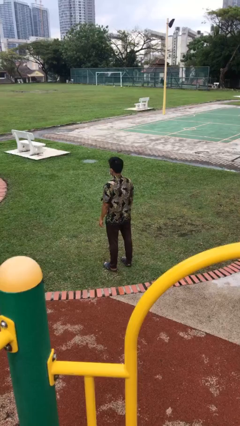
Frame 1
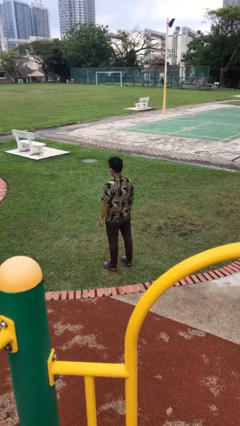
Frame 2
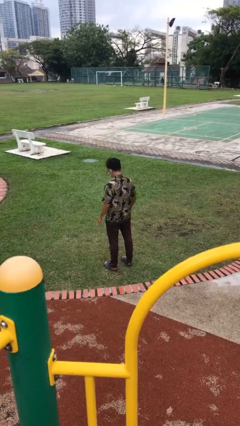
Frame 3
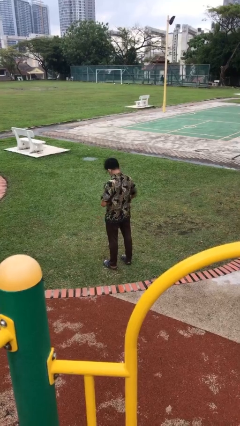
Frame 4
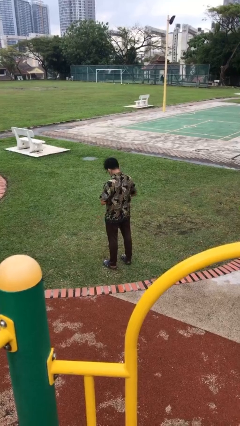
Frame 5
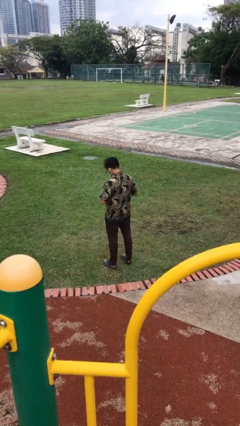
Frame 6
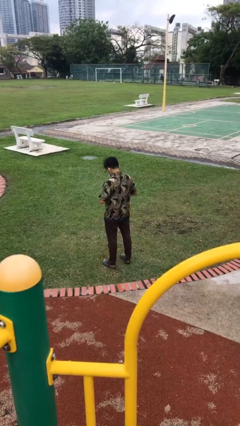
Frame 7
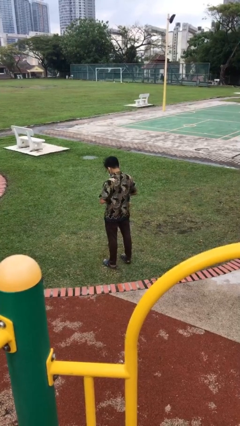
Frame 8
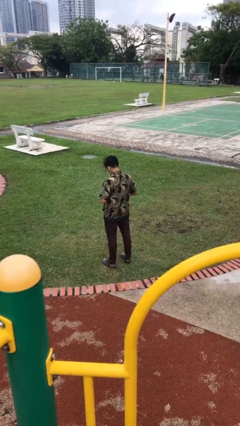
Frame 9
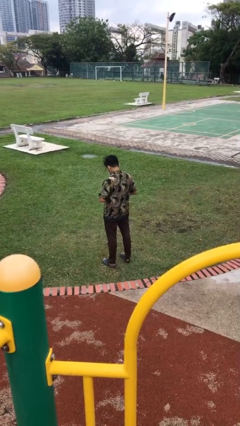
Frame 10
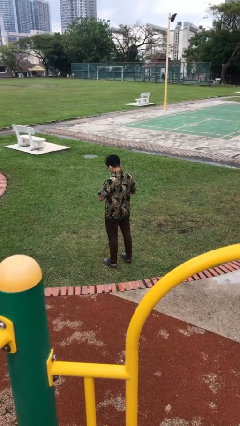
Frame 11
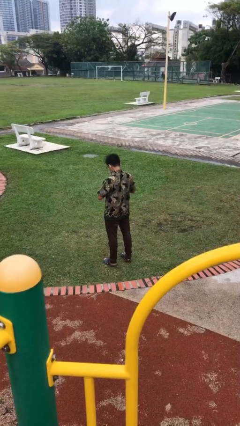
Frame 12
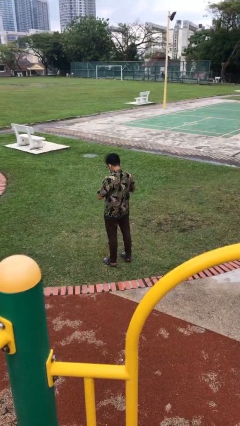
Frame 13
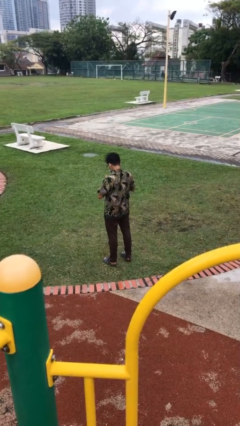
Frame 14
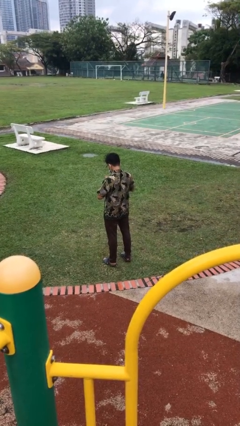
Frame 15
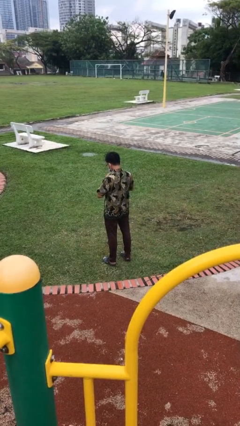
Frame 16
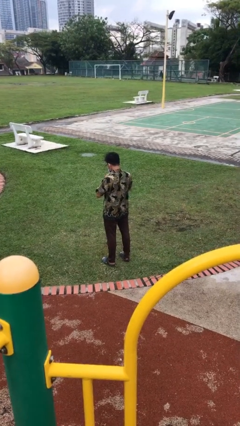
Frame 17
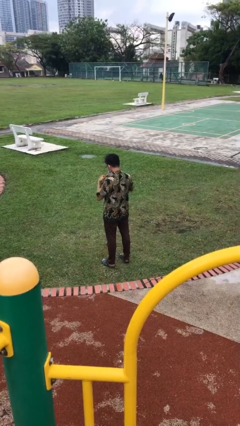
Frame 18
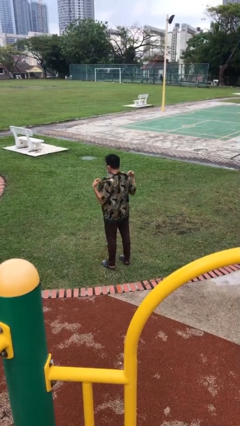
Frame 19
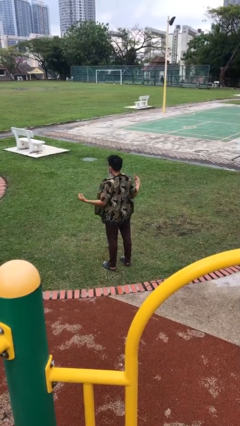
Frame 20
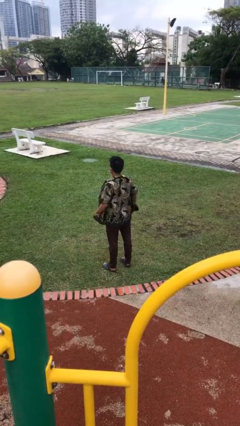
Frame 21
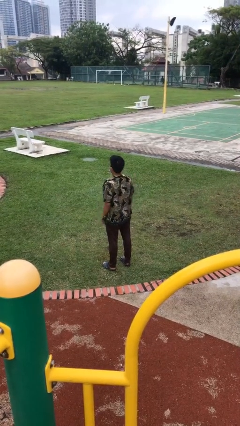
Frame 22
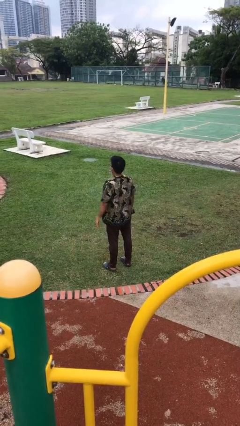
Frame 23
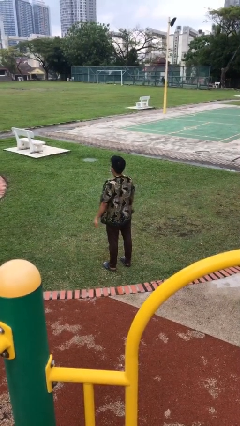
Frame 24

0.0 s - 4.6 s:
person unbuttons shirt

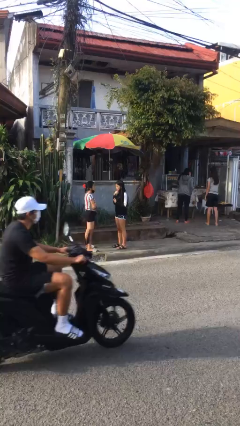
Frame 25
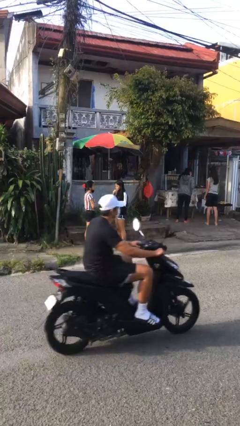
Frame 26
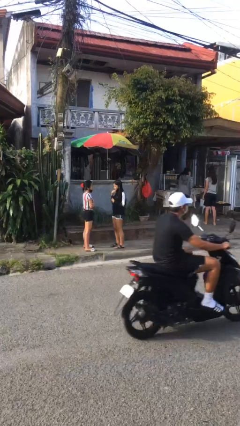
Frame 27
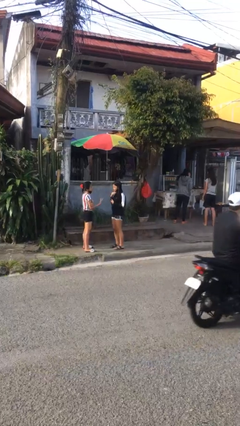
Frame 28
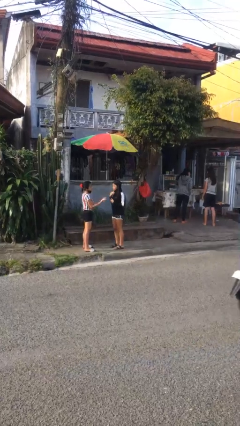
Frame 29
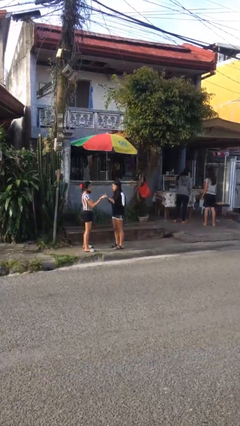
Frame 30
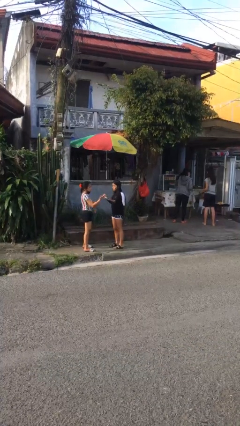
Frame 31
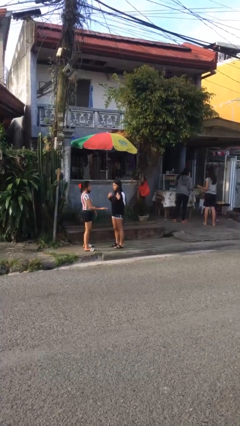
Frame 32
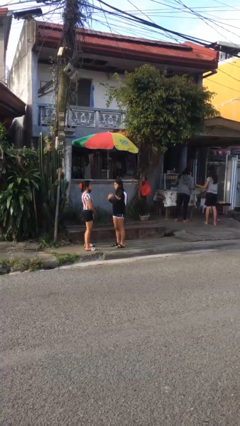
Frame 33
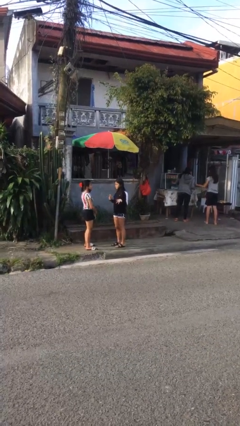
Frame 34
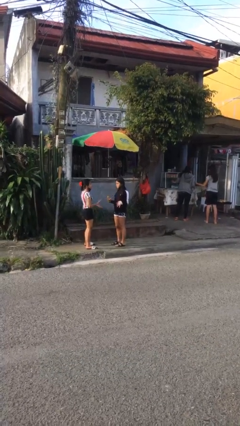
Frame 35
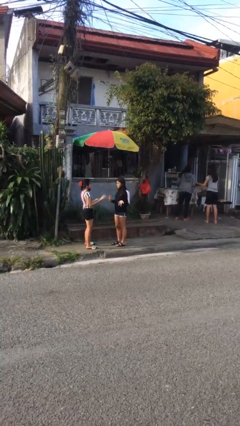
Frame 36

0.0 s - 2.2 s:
person talks to person

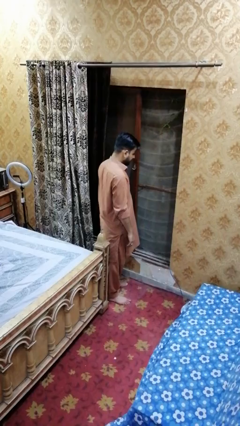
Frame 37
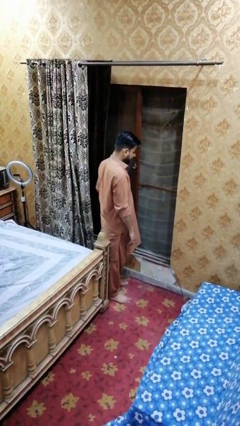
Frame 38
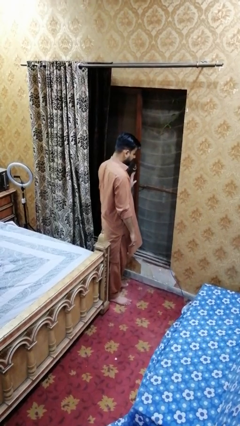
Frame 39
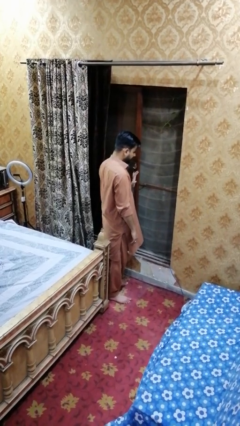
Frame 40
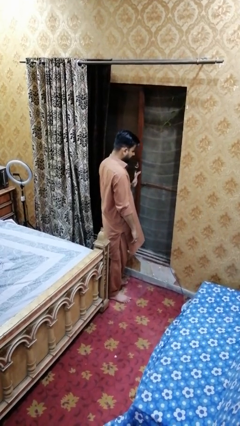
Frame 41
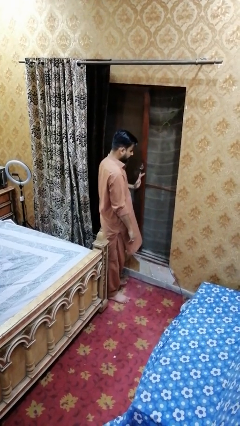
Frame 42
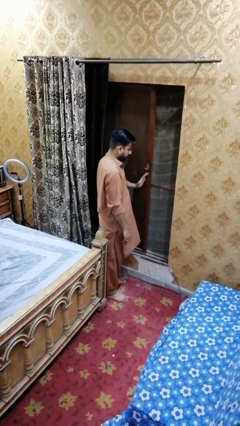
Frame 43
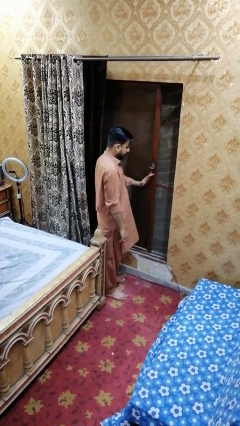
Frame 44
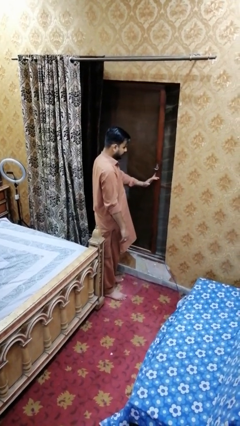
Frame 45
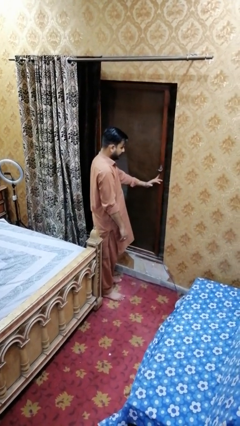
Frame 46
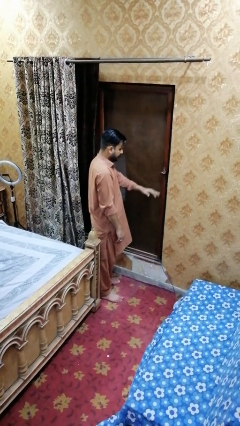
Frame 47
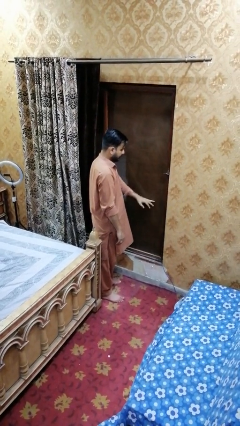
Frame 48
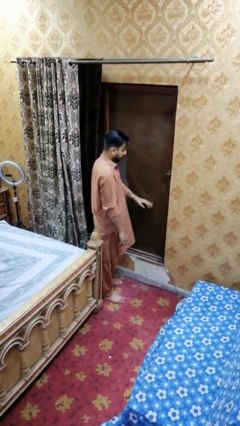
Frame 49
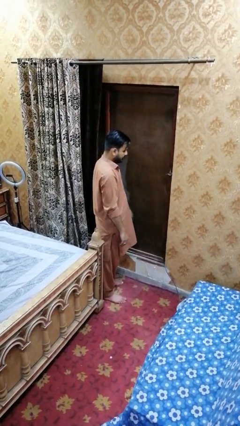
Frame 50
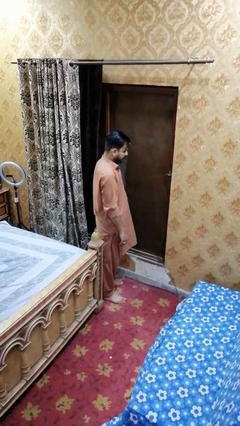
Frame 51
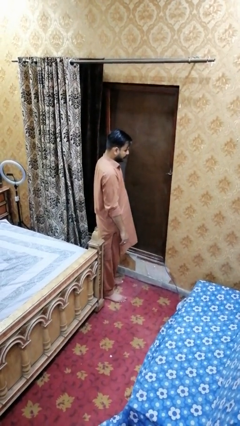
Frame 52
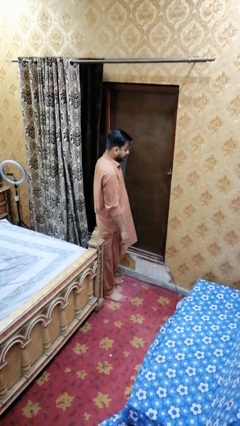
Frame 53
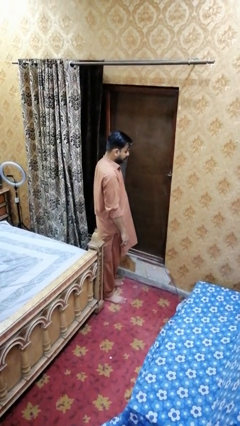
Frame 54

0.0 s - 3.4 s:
person closes home window

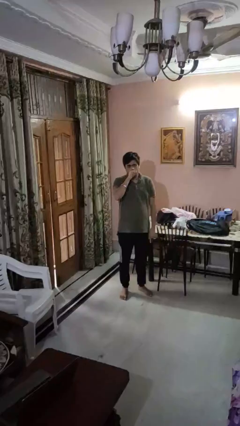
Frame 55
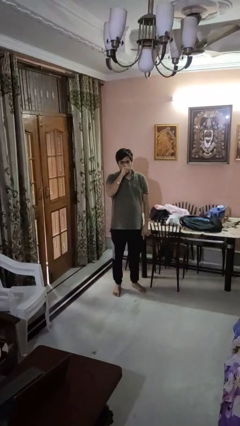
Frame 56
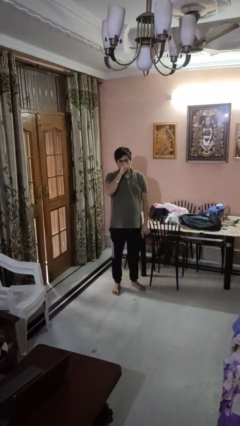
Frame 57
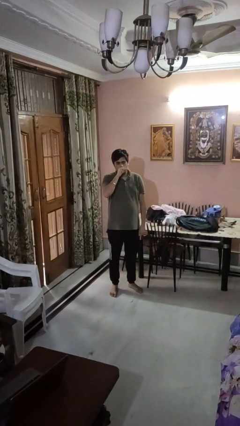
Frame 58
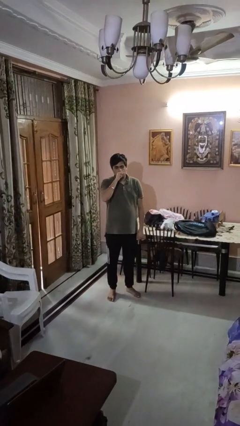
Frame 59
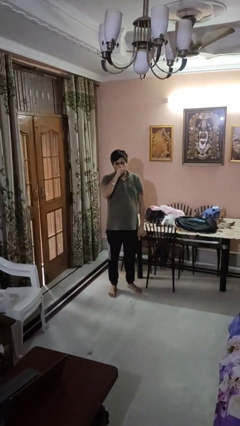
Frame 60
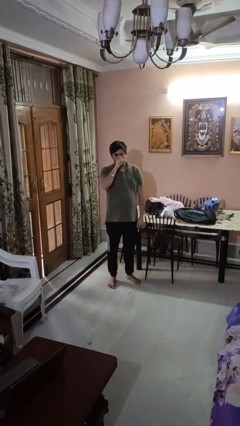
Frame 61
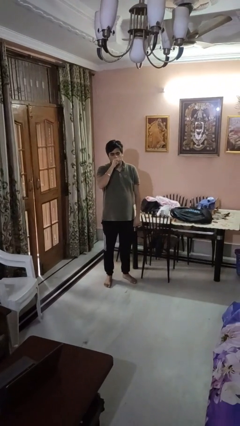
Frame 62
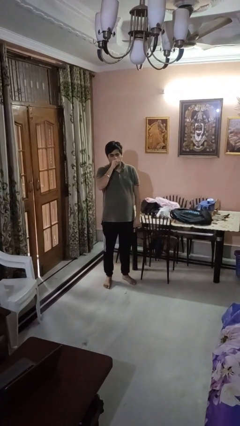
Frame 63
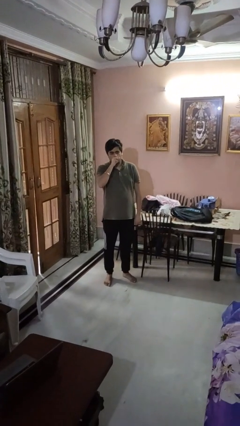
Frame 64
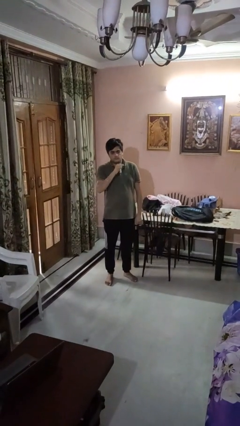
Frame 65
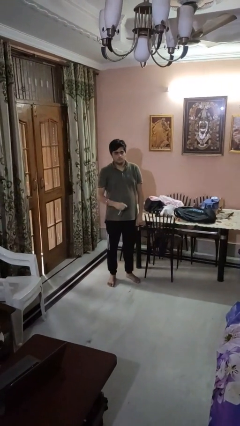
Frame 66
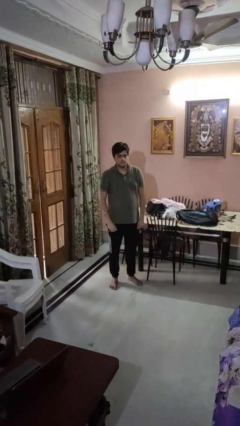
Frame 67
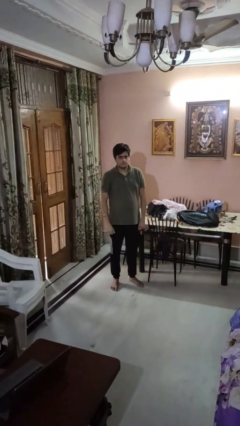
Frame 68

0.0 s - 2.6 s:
person vapes

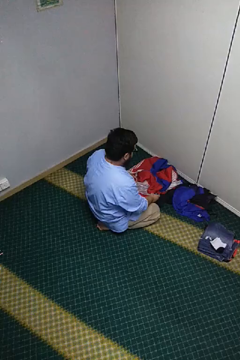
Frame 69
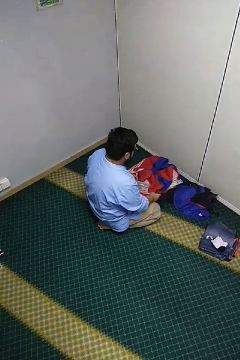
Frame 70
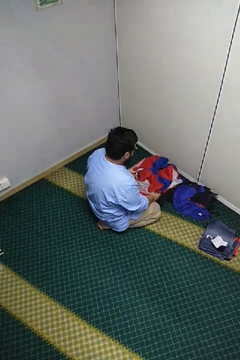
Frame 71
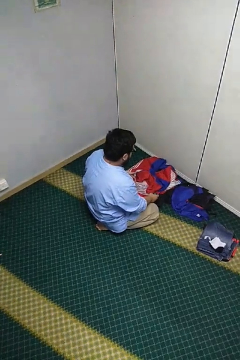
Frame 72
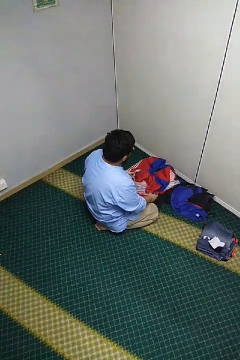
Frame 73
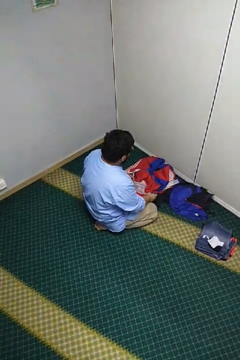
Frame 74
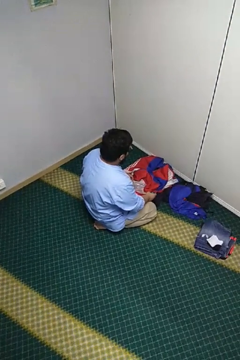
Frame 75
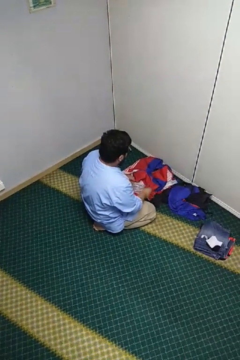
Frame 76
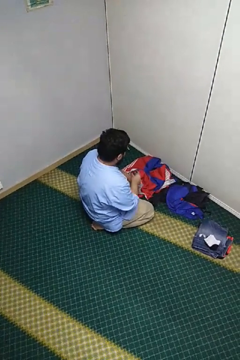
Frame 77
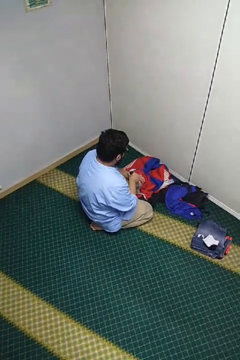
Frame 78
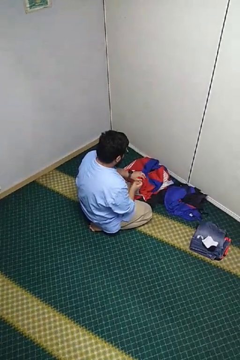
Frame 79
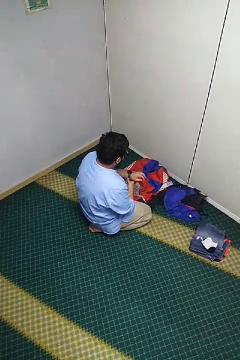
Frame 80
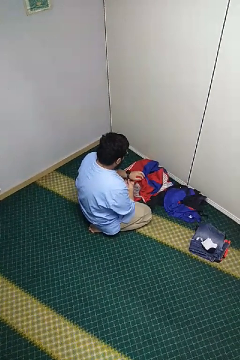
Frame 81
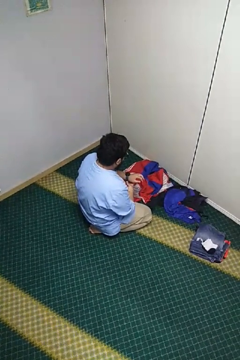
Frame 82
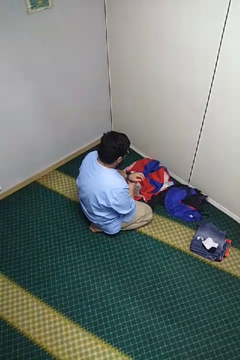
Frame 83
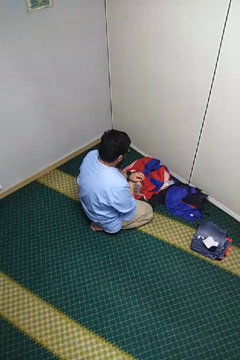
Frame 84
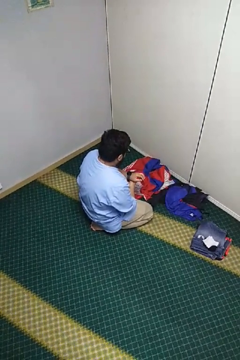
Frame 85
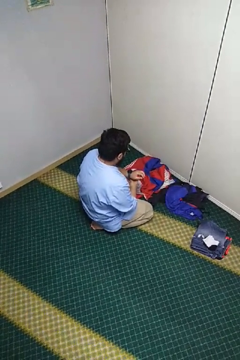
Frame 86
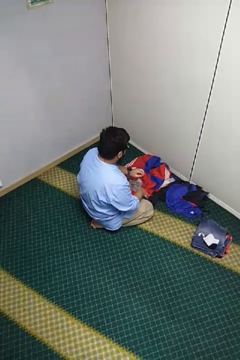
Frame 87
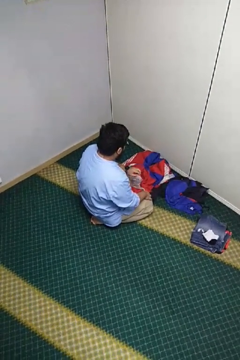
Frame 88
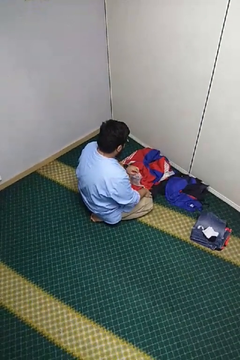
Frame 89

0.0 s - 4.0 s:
person puts on wristwatch

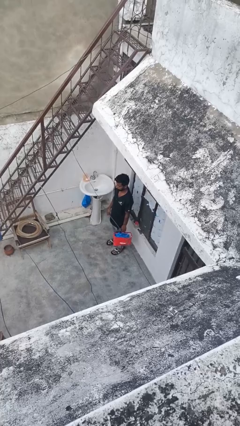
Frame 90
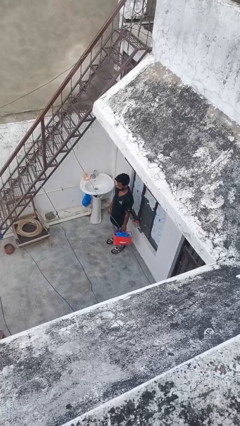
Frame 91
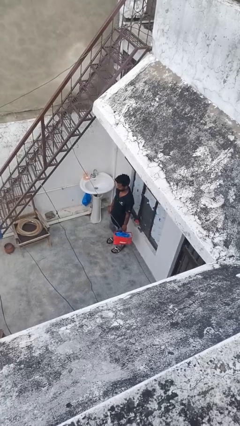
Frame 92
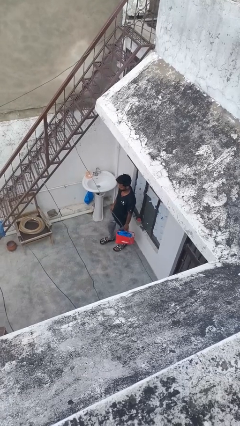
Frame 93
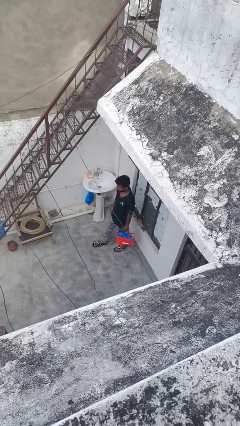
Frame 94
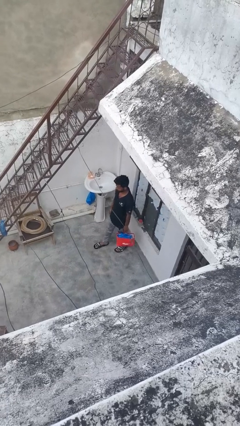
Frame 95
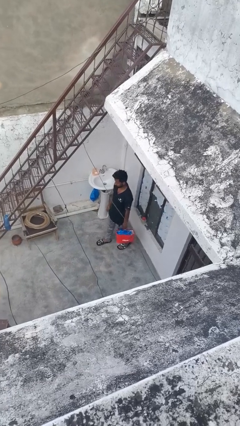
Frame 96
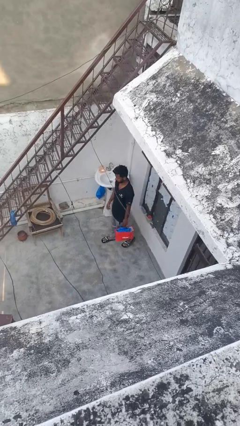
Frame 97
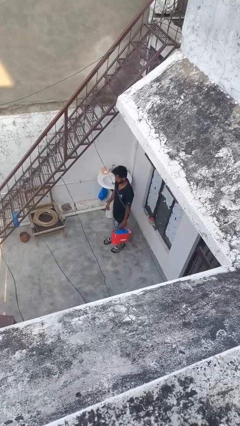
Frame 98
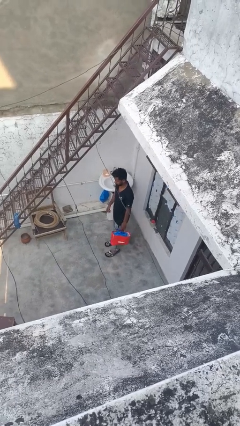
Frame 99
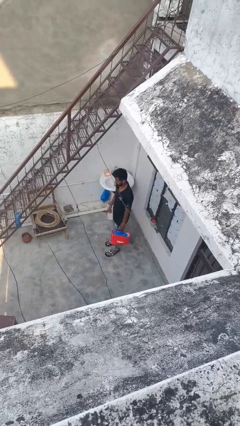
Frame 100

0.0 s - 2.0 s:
person carries groceries
